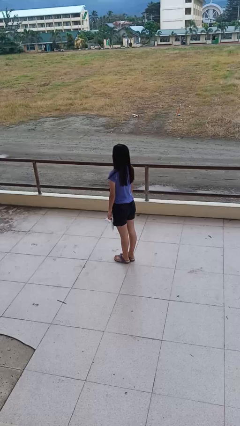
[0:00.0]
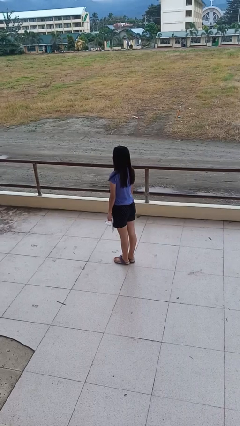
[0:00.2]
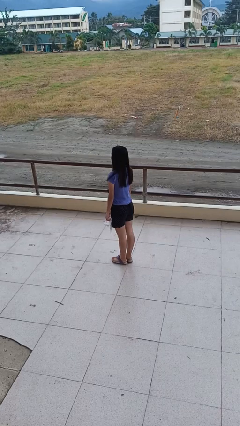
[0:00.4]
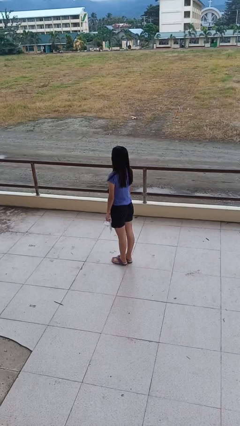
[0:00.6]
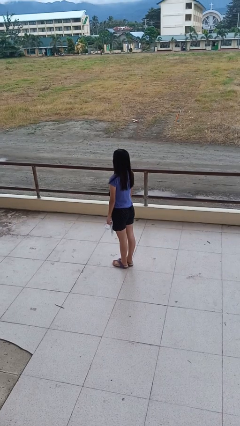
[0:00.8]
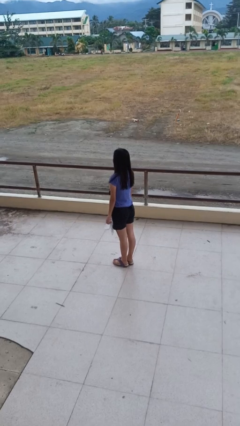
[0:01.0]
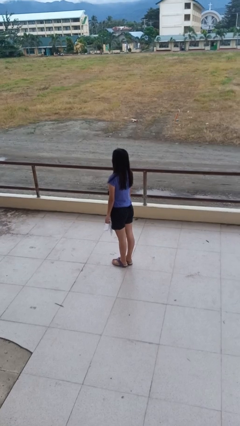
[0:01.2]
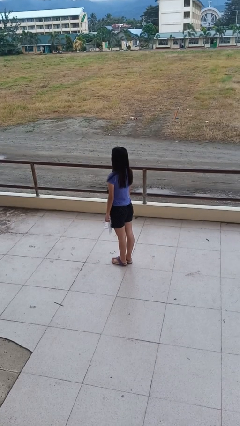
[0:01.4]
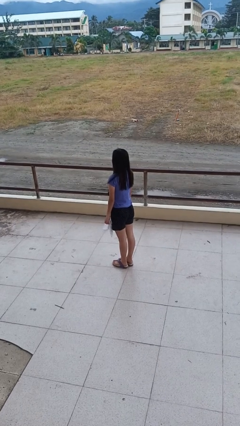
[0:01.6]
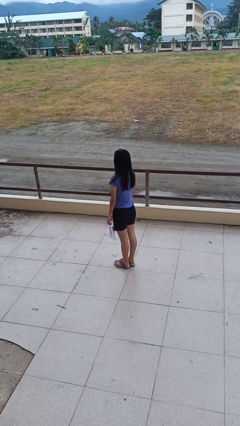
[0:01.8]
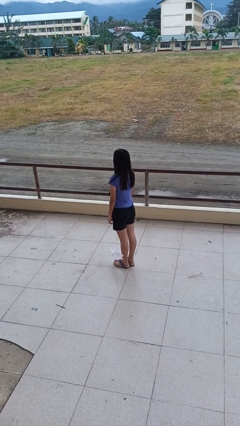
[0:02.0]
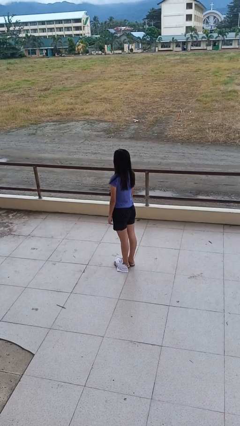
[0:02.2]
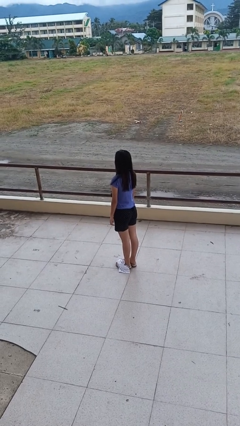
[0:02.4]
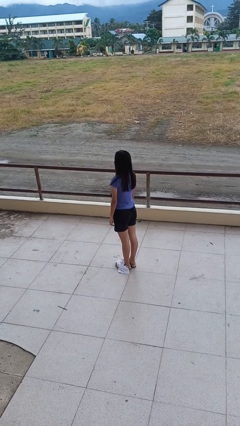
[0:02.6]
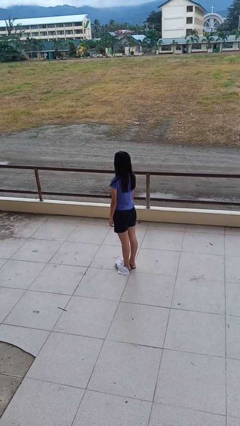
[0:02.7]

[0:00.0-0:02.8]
person drops object

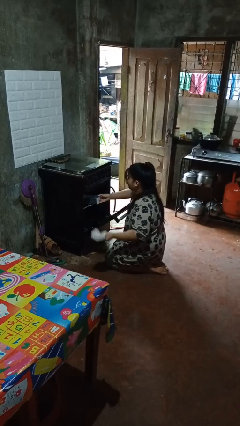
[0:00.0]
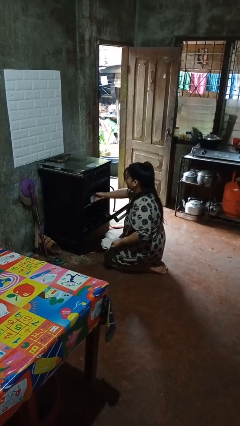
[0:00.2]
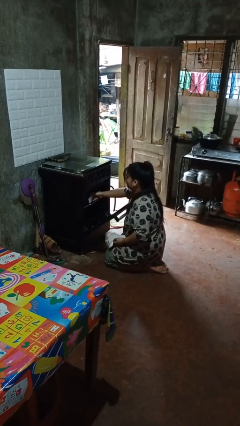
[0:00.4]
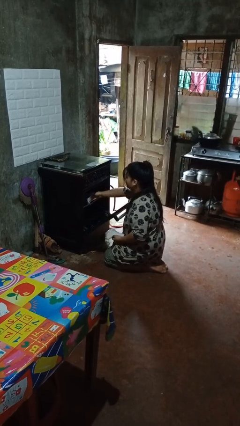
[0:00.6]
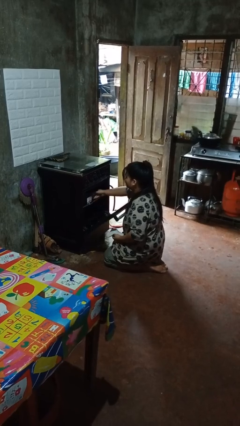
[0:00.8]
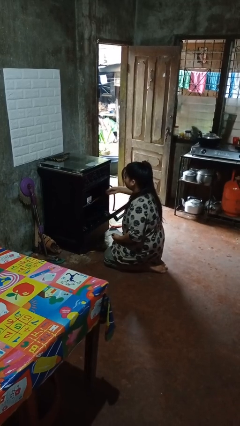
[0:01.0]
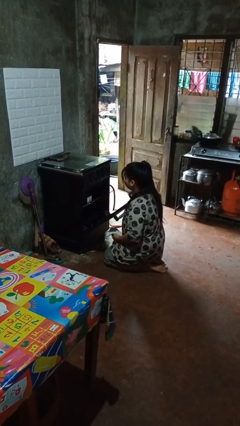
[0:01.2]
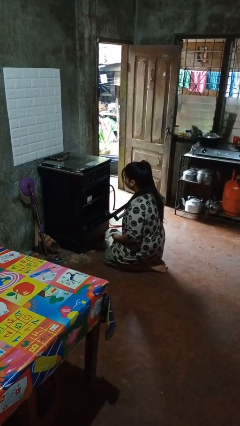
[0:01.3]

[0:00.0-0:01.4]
person puts object into oven

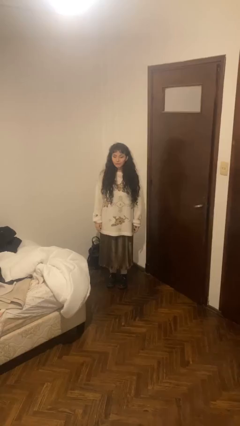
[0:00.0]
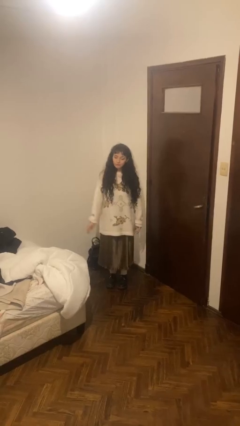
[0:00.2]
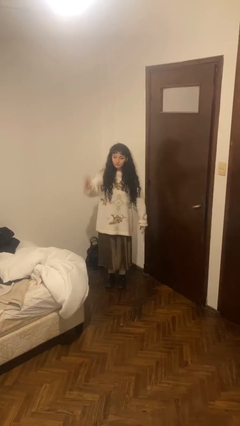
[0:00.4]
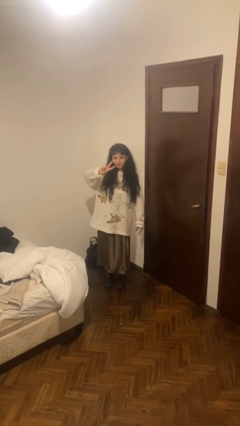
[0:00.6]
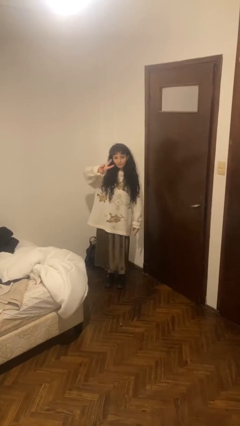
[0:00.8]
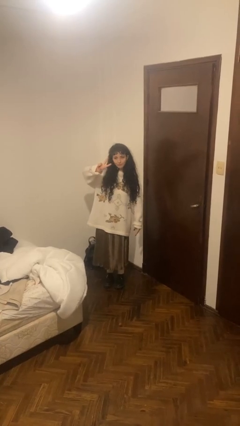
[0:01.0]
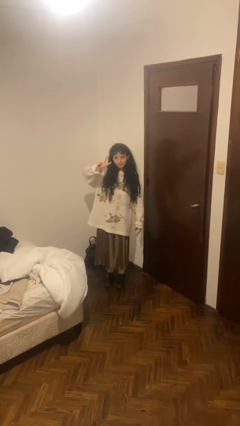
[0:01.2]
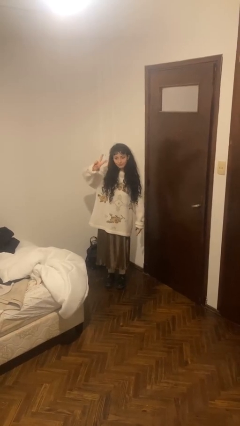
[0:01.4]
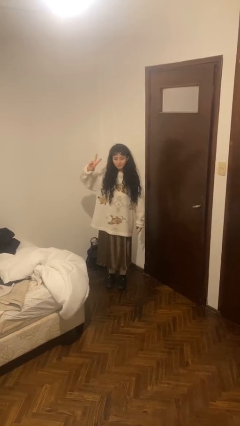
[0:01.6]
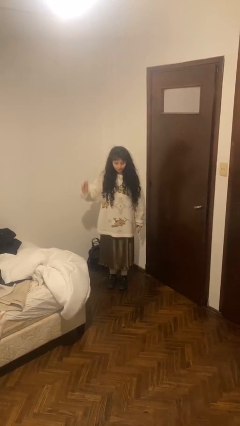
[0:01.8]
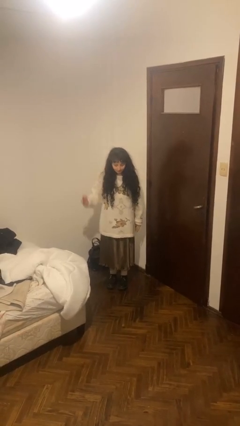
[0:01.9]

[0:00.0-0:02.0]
person gestures peace

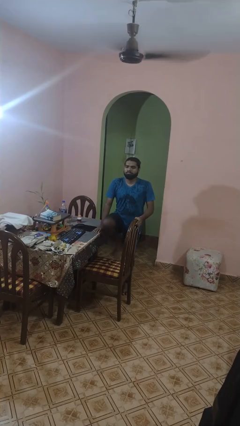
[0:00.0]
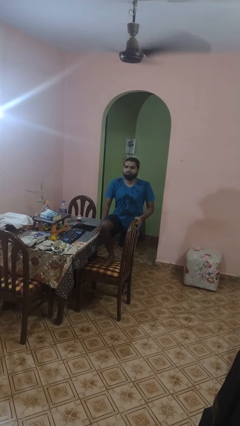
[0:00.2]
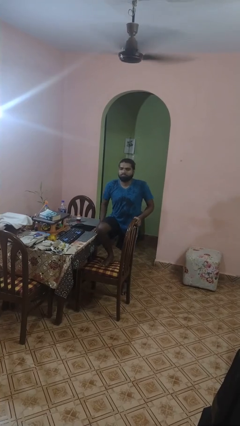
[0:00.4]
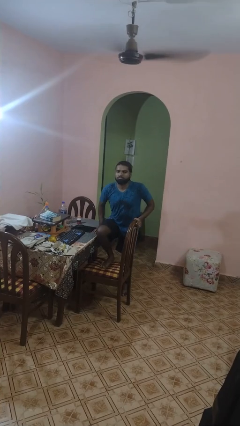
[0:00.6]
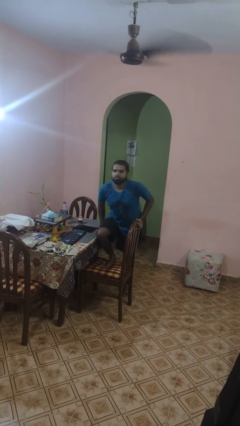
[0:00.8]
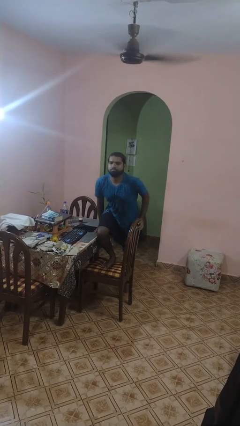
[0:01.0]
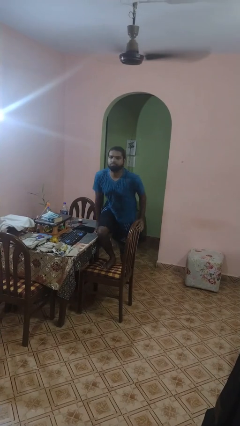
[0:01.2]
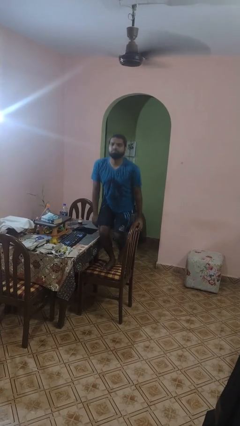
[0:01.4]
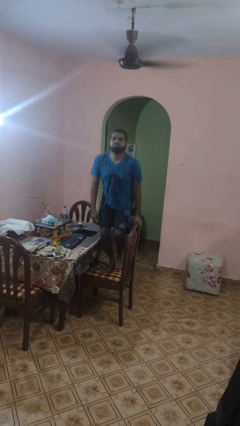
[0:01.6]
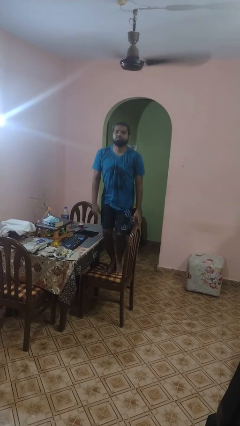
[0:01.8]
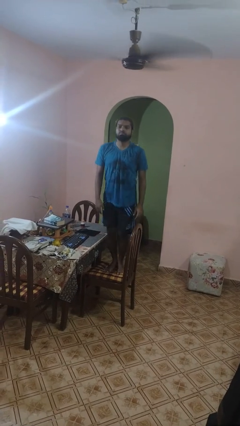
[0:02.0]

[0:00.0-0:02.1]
person climbs on chair

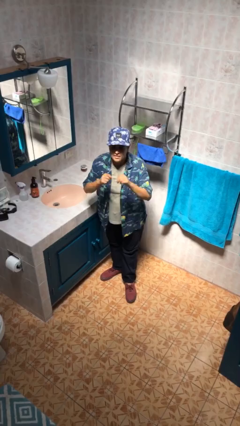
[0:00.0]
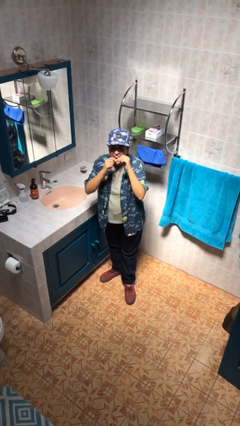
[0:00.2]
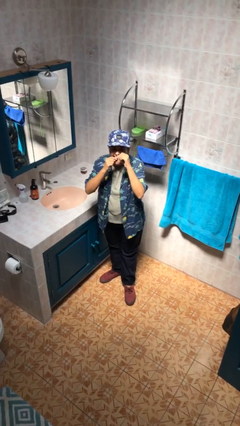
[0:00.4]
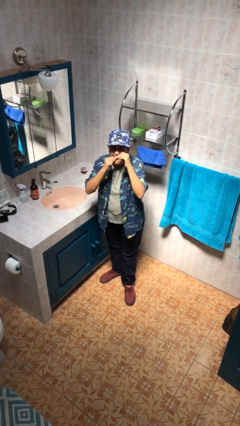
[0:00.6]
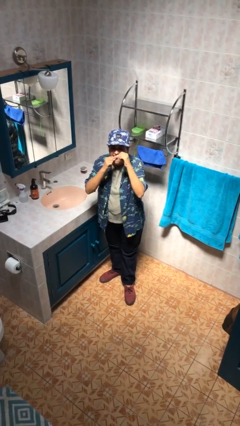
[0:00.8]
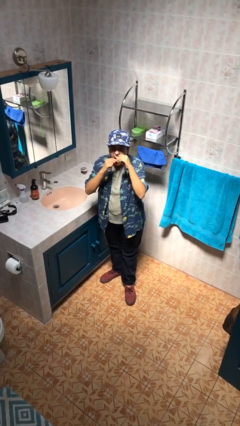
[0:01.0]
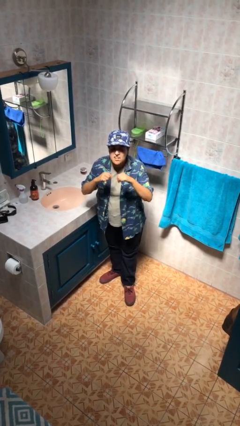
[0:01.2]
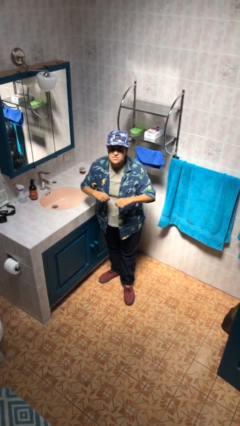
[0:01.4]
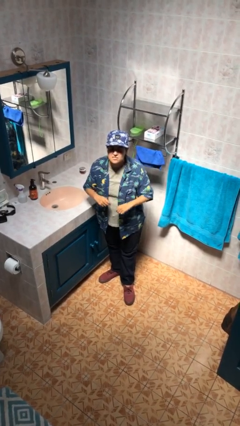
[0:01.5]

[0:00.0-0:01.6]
person flosses

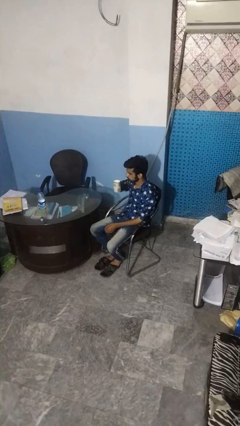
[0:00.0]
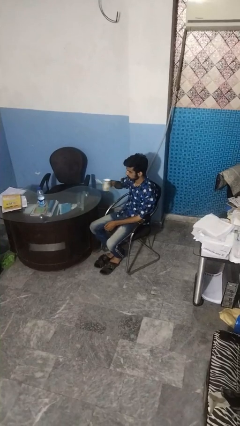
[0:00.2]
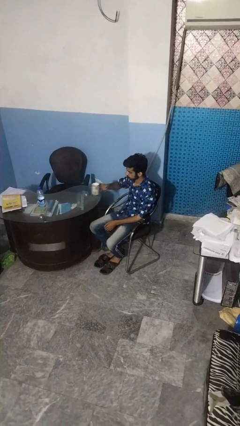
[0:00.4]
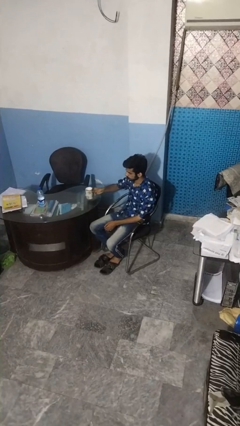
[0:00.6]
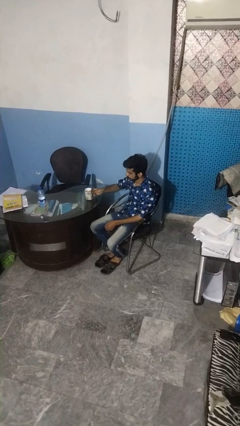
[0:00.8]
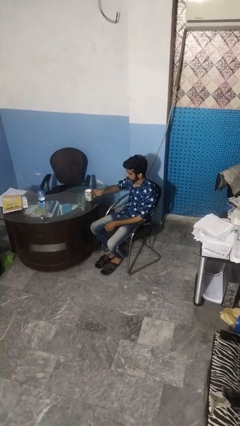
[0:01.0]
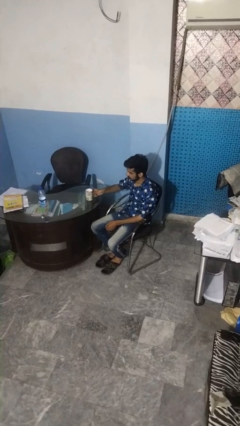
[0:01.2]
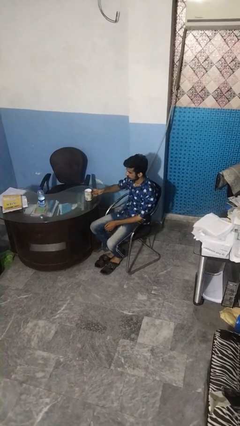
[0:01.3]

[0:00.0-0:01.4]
person puts down object on table

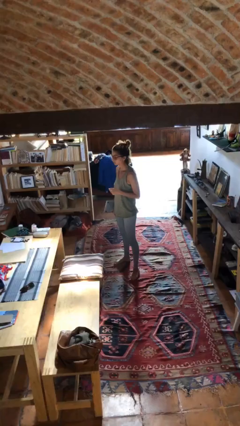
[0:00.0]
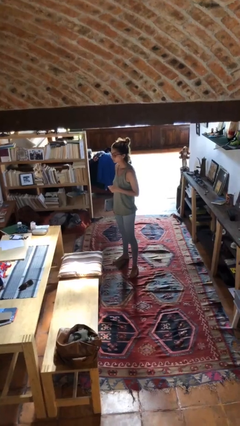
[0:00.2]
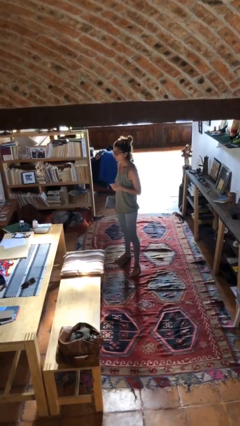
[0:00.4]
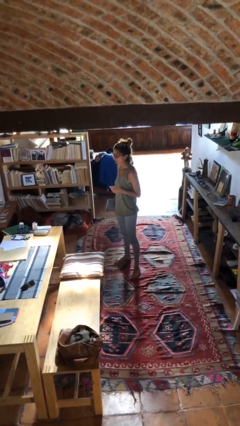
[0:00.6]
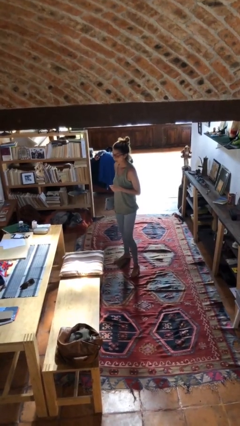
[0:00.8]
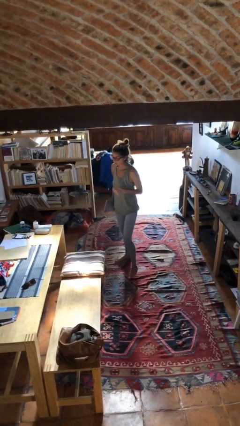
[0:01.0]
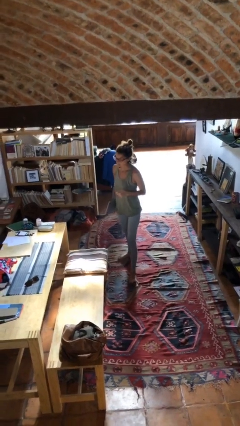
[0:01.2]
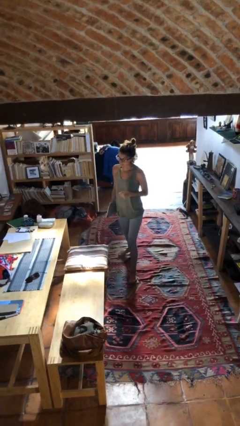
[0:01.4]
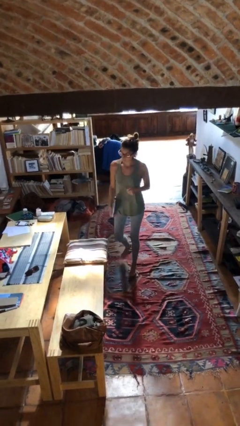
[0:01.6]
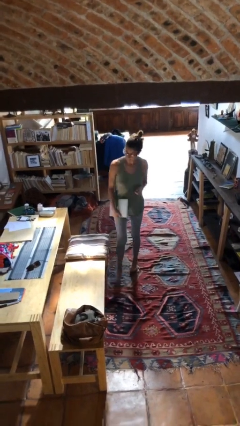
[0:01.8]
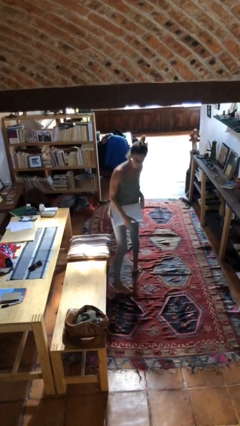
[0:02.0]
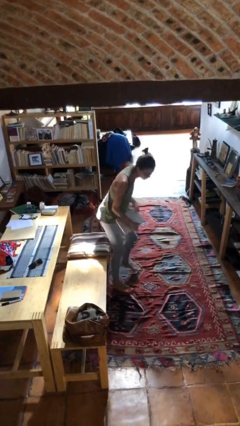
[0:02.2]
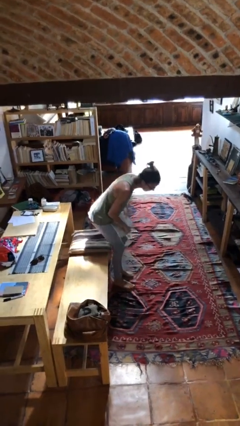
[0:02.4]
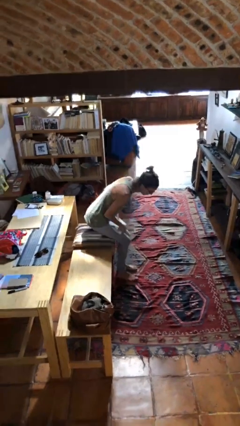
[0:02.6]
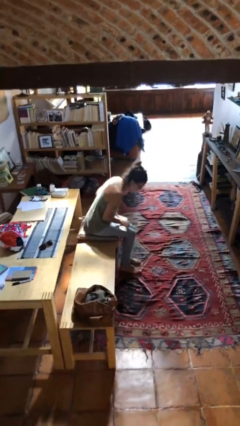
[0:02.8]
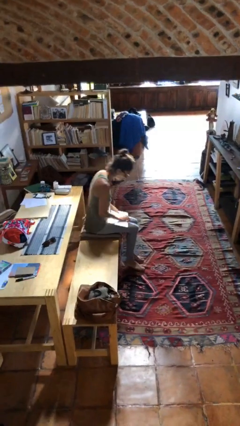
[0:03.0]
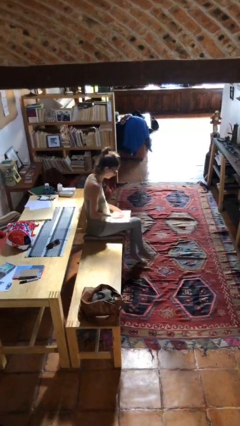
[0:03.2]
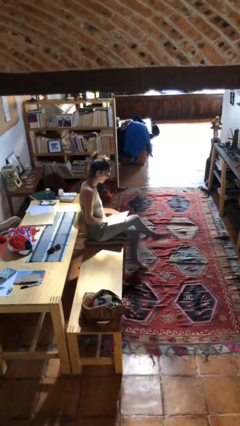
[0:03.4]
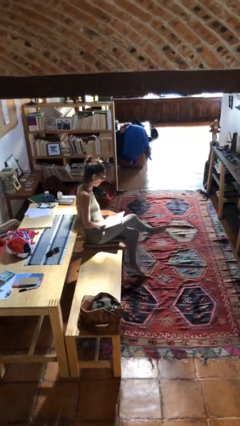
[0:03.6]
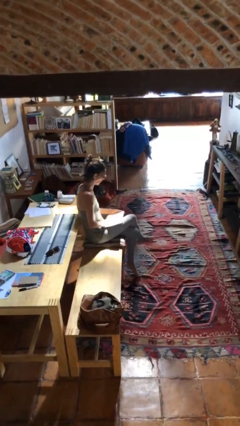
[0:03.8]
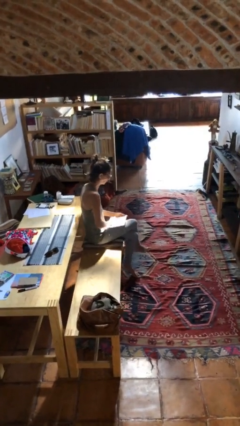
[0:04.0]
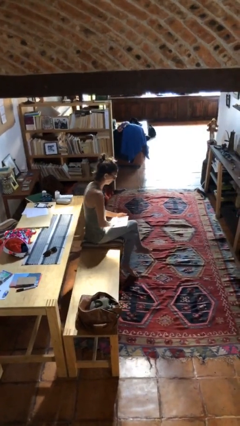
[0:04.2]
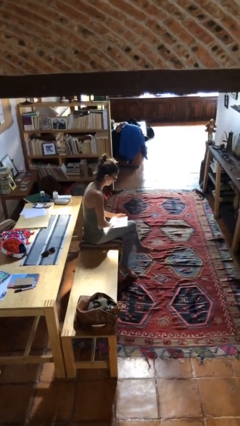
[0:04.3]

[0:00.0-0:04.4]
person sits down

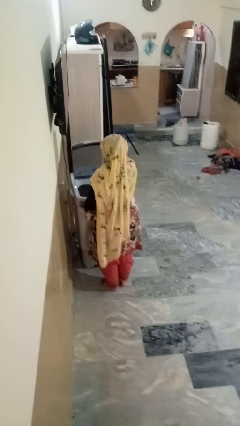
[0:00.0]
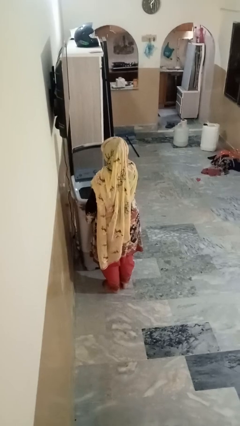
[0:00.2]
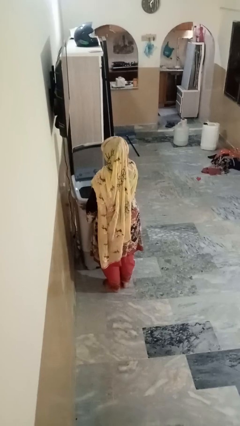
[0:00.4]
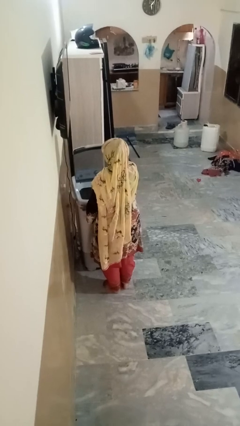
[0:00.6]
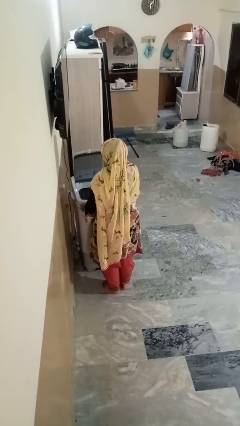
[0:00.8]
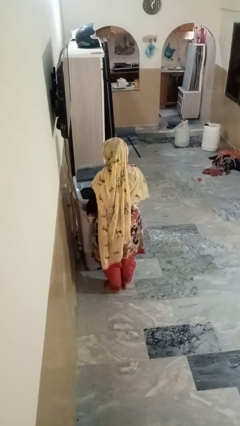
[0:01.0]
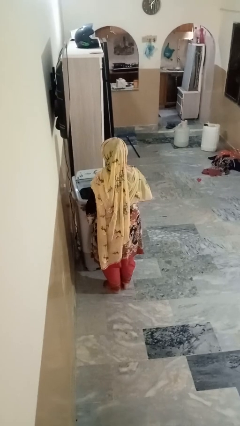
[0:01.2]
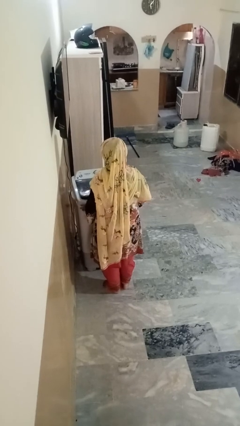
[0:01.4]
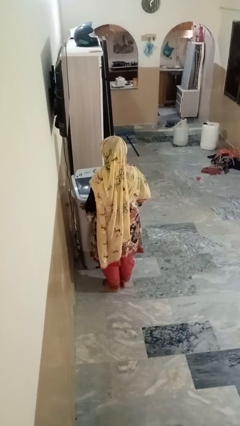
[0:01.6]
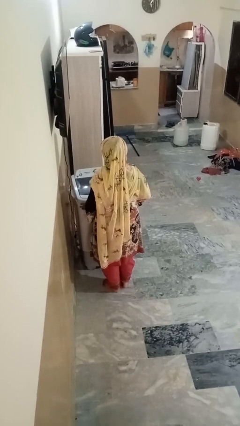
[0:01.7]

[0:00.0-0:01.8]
person closes clothes washer
